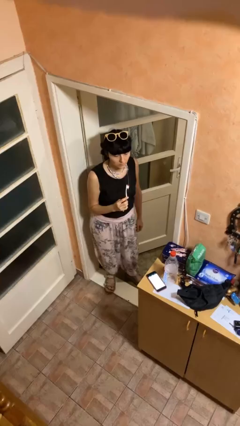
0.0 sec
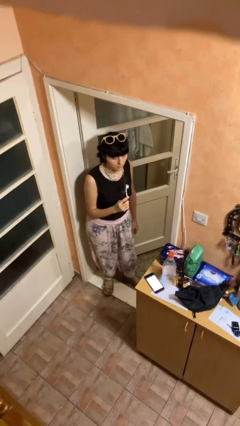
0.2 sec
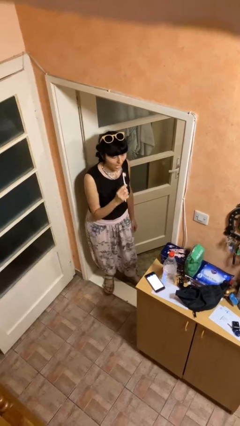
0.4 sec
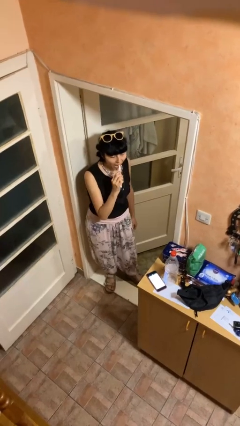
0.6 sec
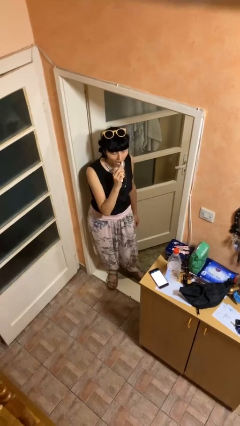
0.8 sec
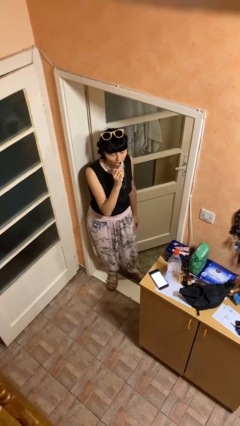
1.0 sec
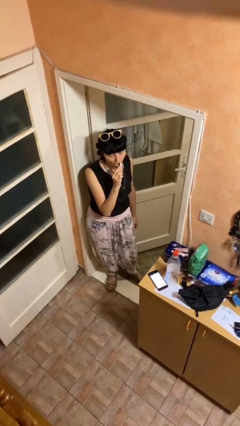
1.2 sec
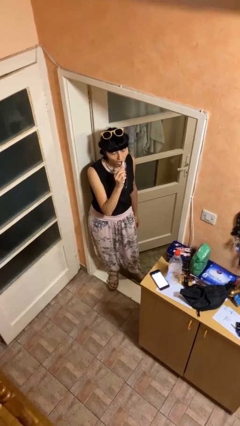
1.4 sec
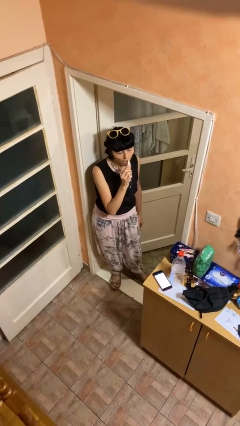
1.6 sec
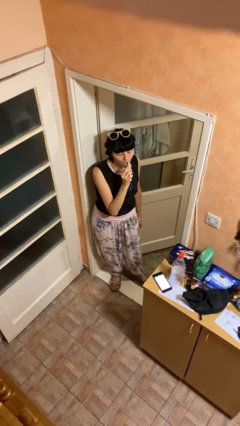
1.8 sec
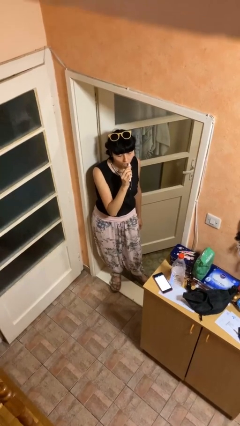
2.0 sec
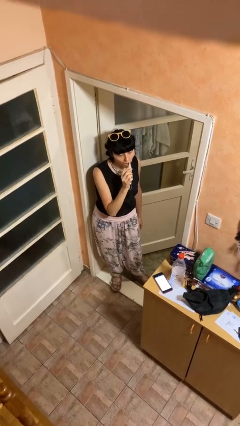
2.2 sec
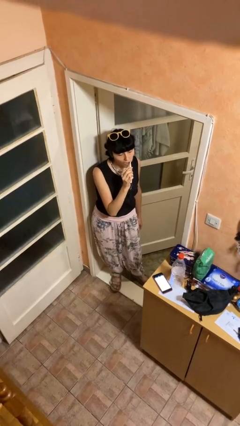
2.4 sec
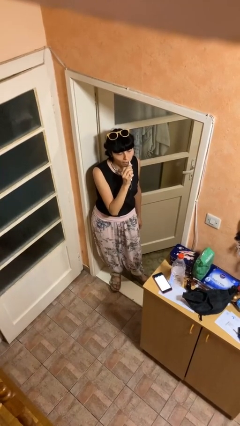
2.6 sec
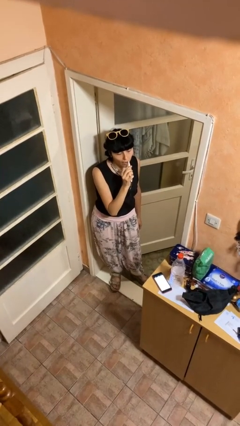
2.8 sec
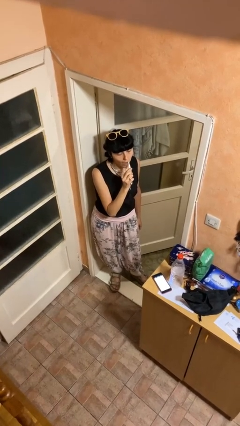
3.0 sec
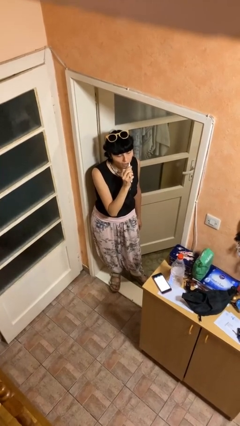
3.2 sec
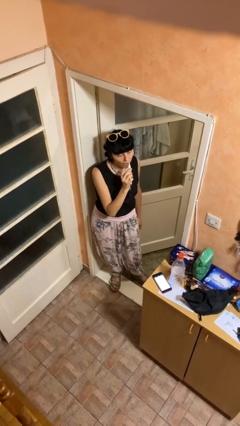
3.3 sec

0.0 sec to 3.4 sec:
person brushes teeth

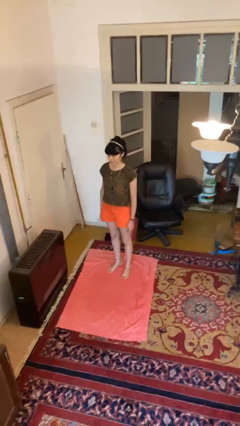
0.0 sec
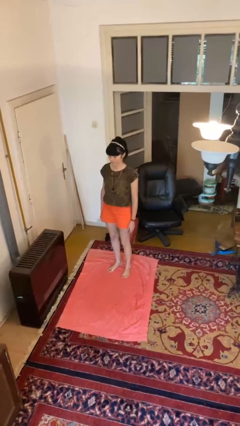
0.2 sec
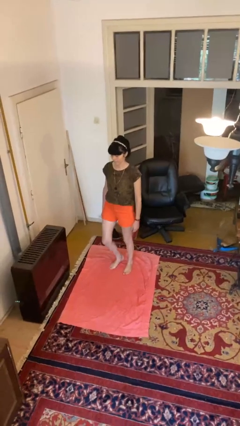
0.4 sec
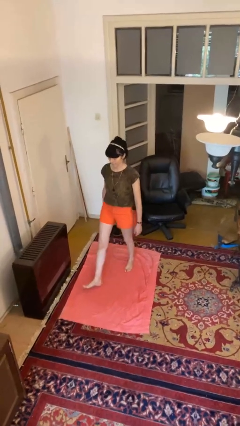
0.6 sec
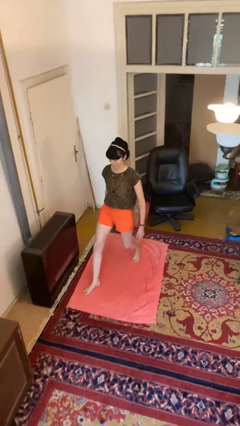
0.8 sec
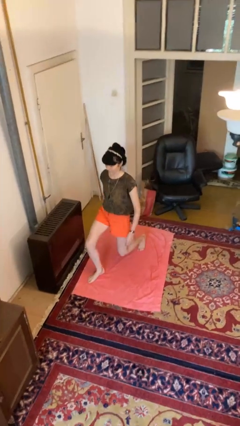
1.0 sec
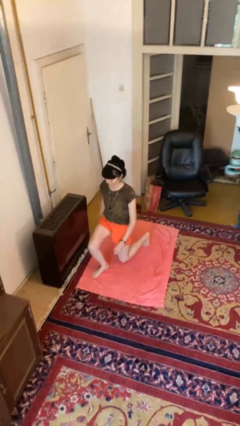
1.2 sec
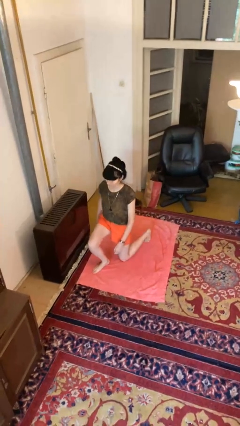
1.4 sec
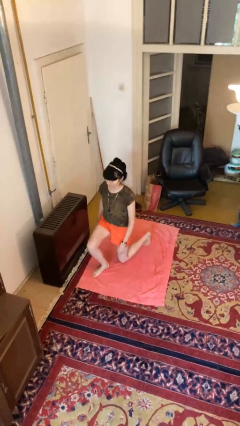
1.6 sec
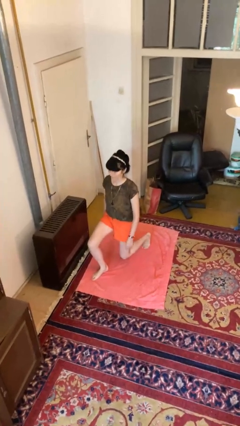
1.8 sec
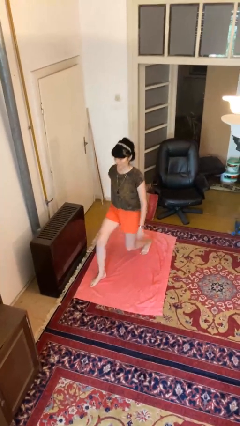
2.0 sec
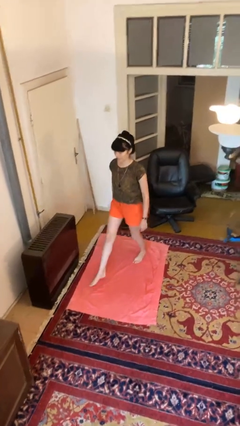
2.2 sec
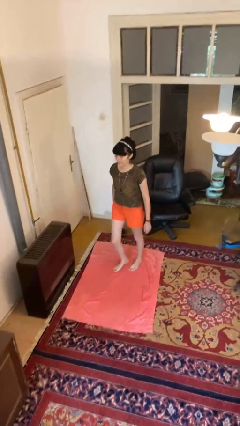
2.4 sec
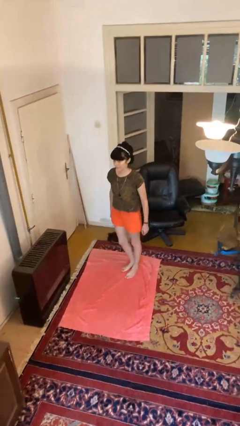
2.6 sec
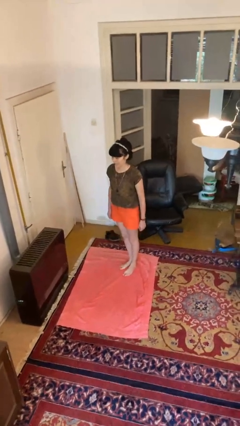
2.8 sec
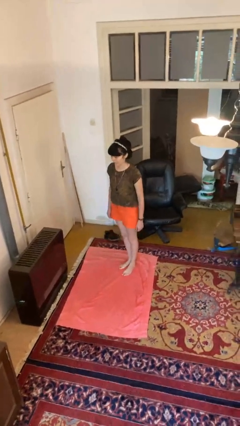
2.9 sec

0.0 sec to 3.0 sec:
person exercises with lunges

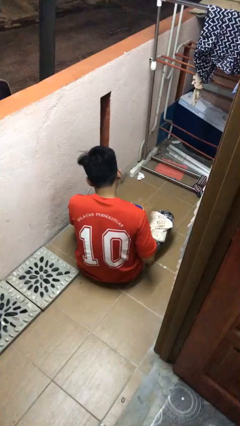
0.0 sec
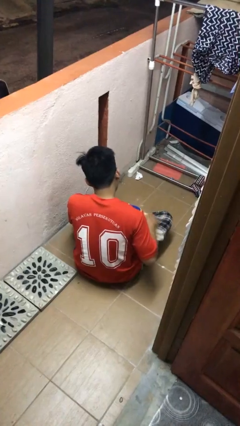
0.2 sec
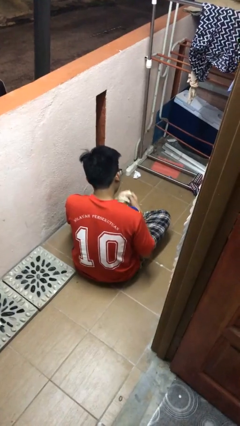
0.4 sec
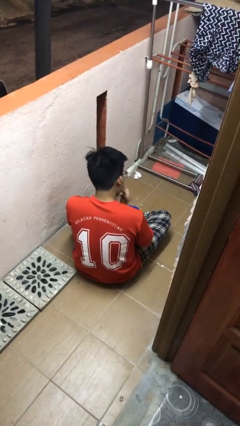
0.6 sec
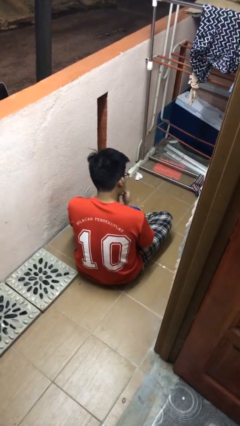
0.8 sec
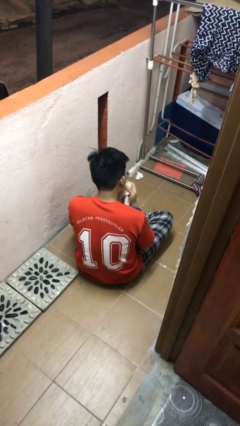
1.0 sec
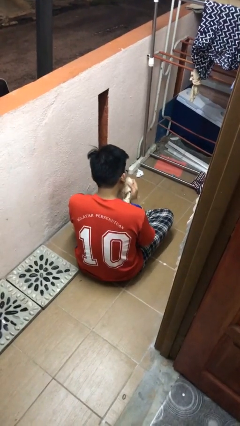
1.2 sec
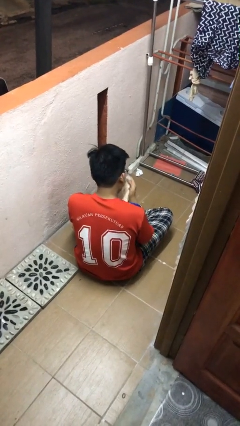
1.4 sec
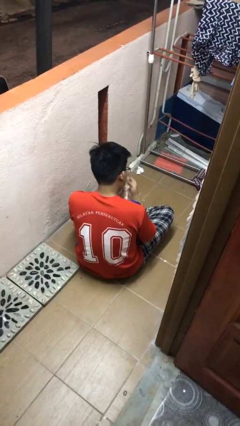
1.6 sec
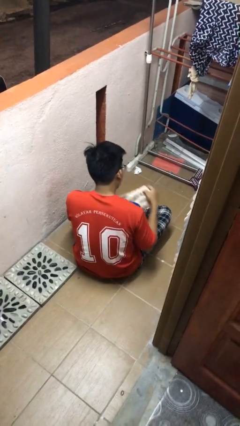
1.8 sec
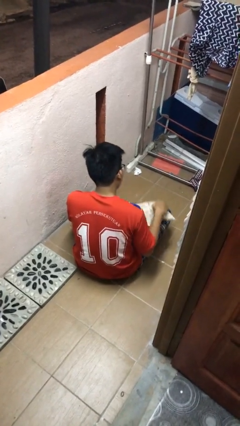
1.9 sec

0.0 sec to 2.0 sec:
person wipes mouth with napkin

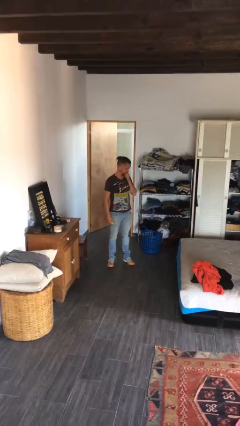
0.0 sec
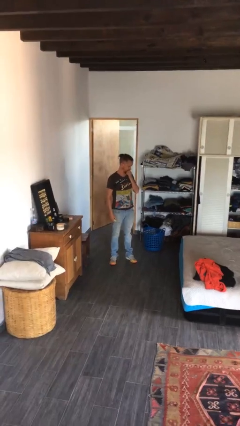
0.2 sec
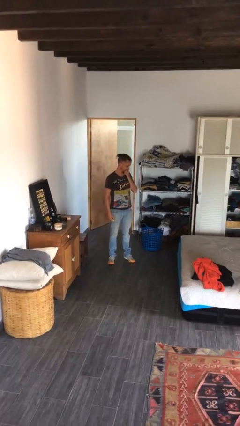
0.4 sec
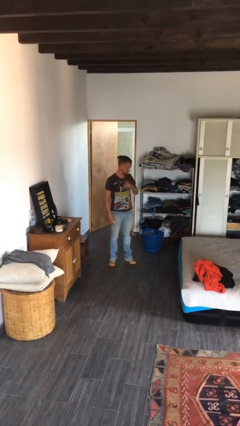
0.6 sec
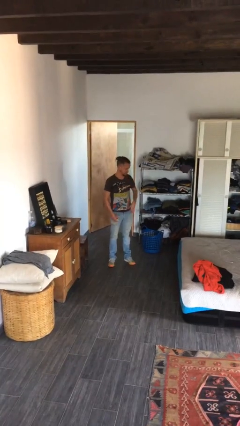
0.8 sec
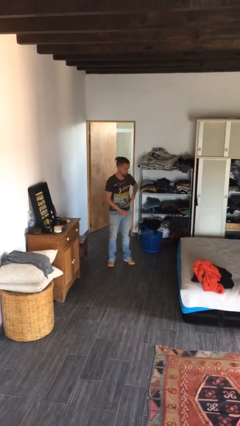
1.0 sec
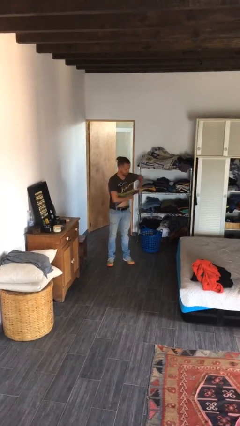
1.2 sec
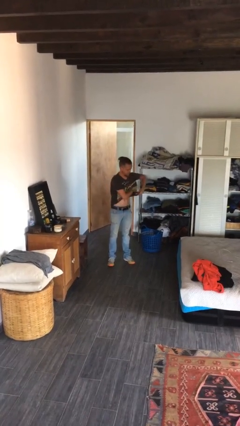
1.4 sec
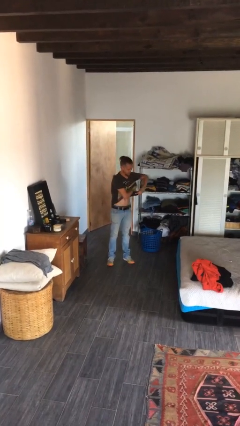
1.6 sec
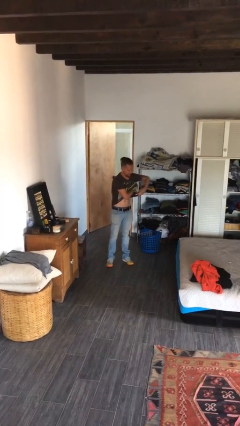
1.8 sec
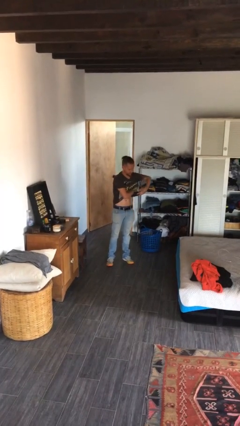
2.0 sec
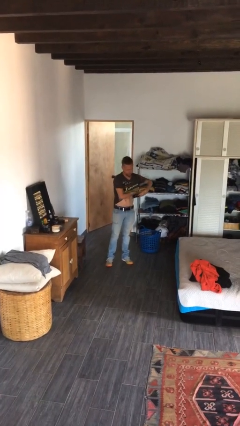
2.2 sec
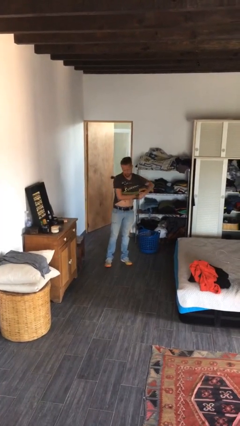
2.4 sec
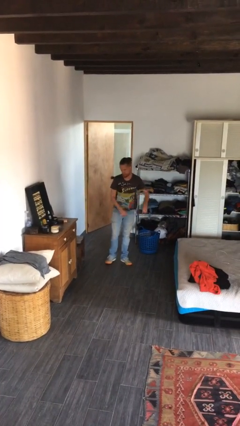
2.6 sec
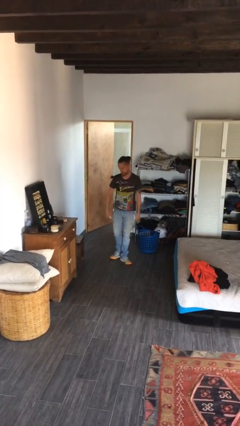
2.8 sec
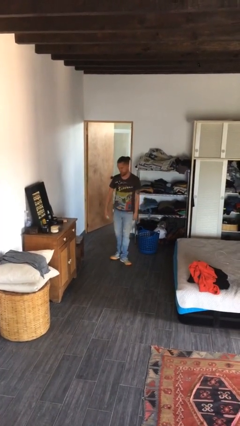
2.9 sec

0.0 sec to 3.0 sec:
person applies deodorant

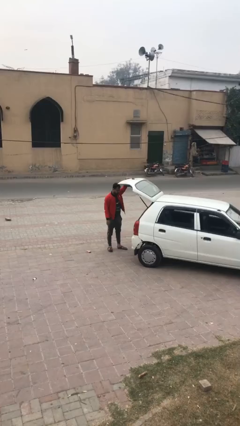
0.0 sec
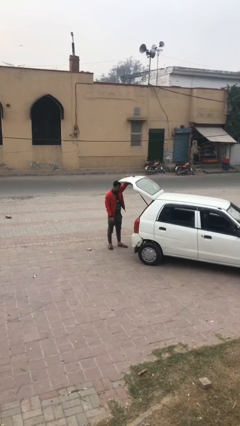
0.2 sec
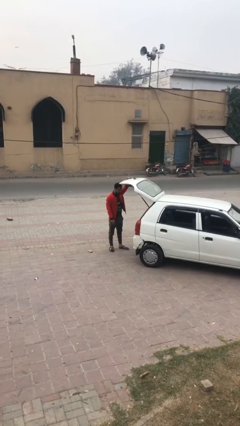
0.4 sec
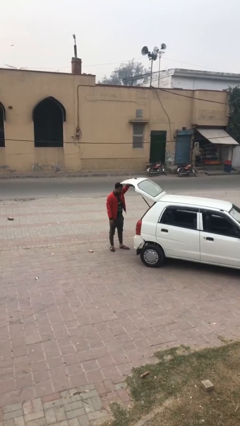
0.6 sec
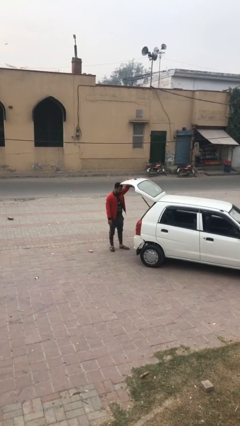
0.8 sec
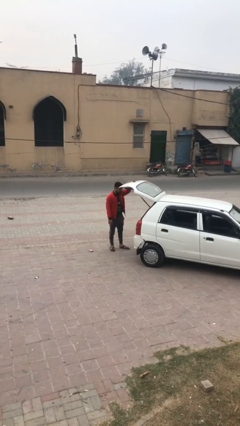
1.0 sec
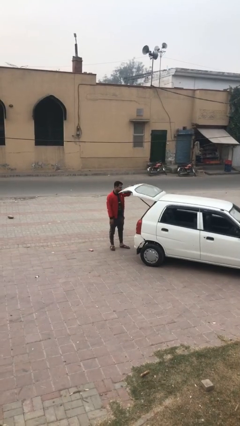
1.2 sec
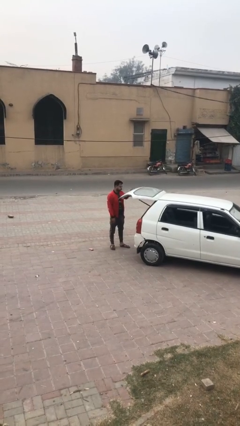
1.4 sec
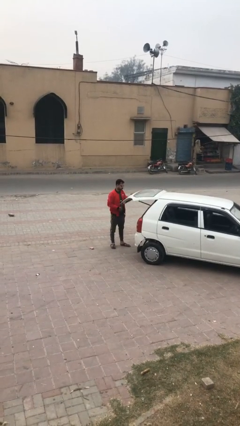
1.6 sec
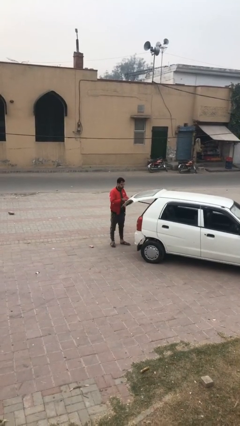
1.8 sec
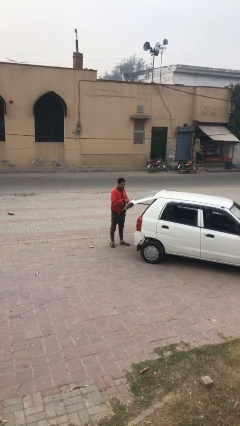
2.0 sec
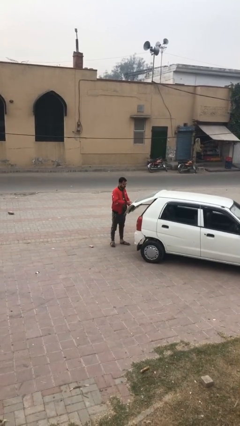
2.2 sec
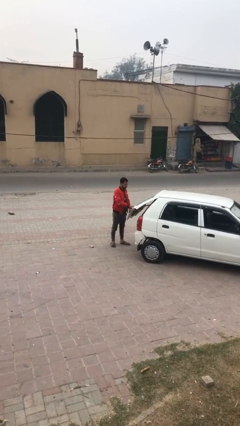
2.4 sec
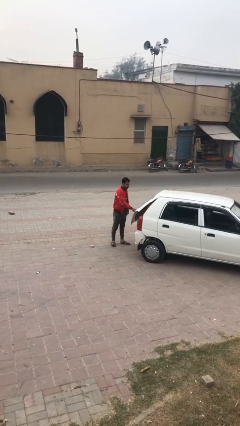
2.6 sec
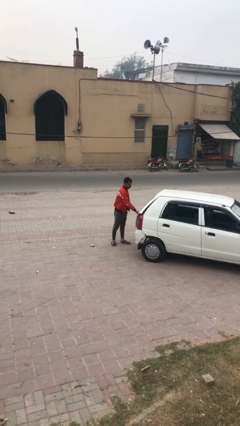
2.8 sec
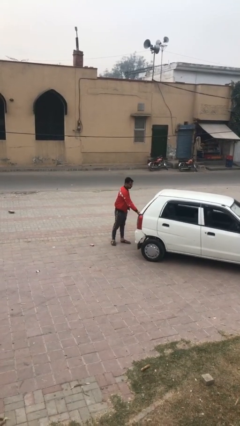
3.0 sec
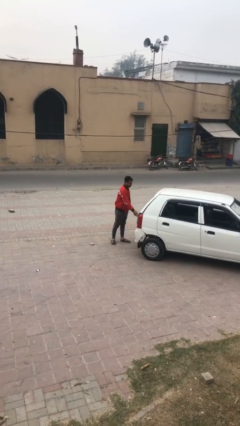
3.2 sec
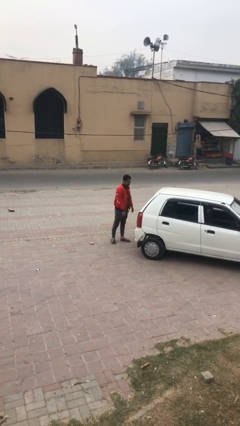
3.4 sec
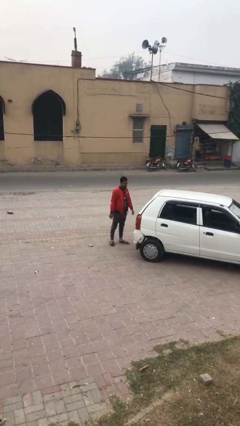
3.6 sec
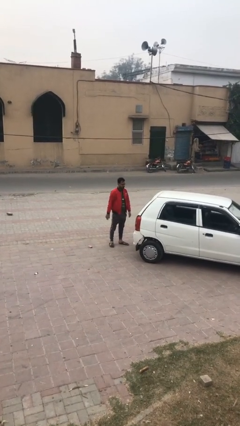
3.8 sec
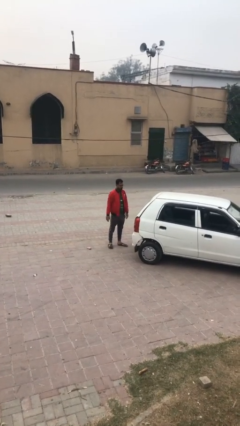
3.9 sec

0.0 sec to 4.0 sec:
person closes car trunk

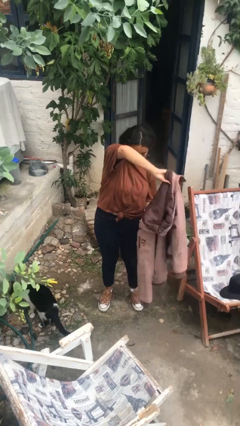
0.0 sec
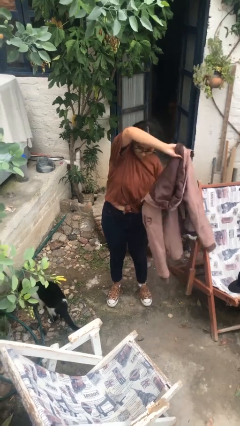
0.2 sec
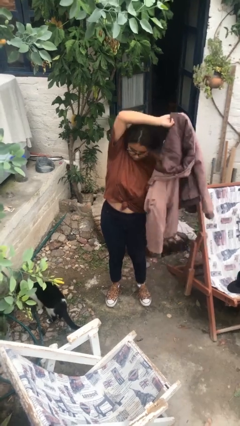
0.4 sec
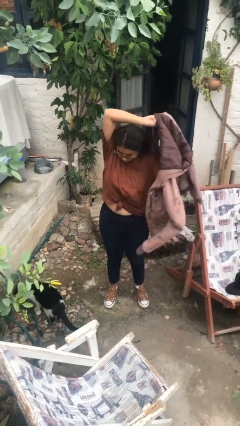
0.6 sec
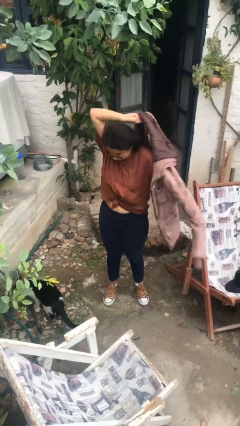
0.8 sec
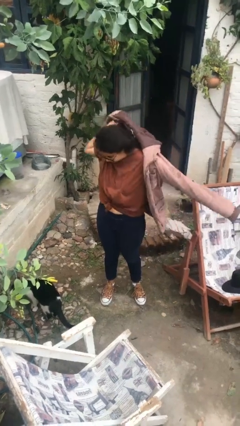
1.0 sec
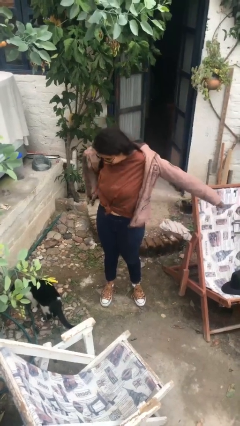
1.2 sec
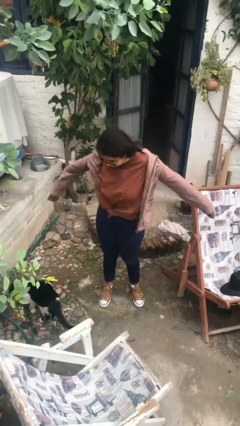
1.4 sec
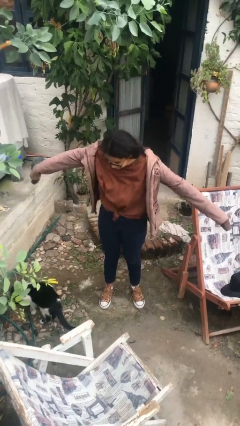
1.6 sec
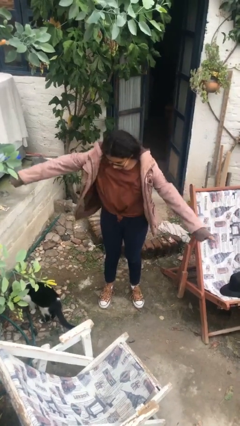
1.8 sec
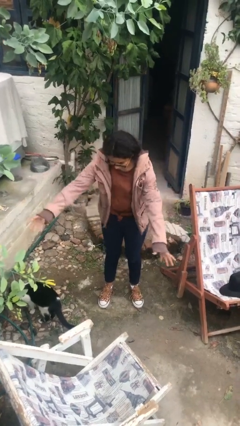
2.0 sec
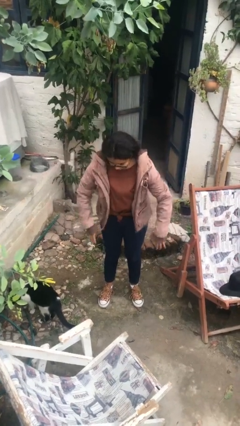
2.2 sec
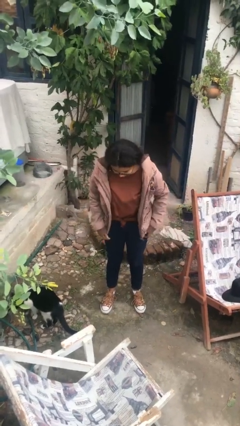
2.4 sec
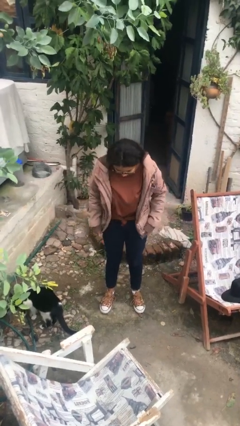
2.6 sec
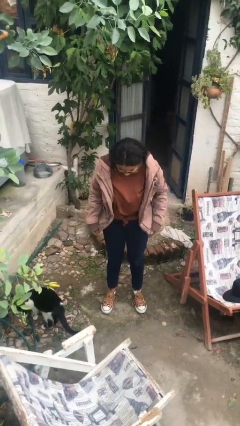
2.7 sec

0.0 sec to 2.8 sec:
person puts on jacket
